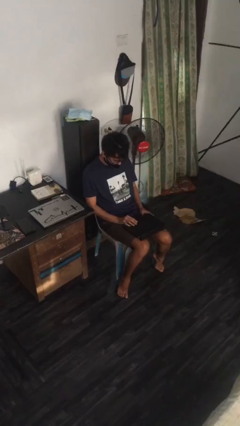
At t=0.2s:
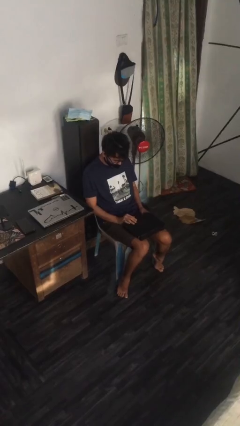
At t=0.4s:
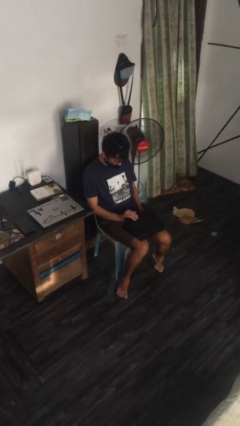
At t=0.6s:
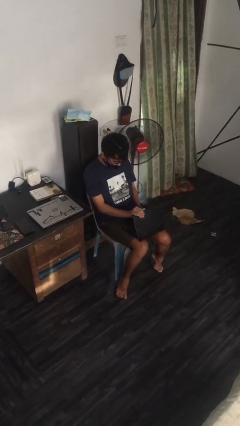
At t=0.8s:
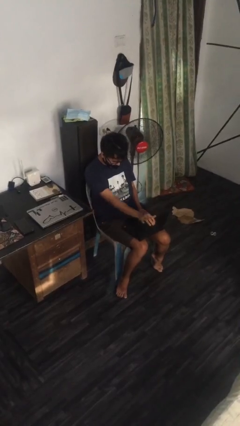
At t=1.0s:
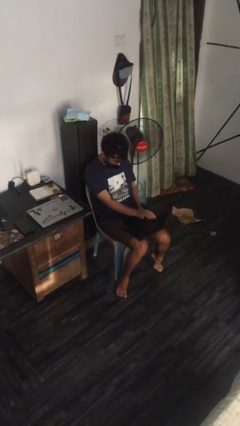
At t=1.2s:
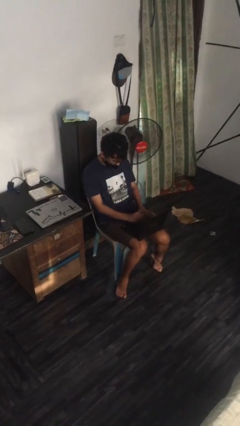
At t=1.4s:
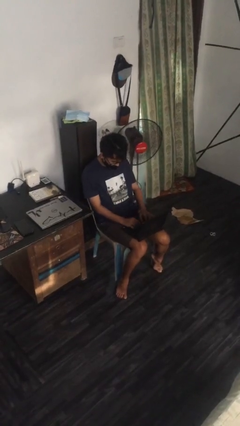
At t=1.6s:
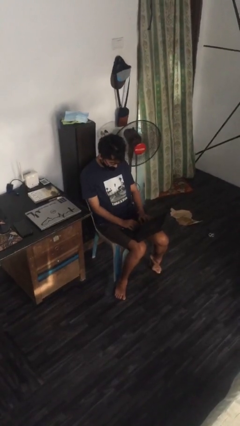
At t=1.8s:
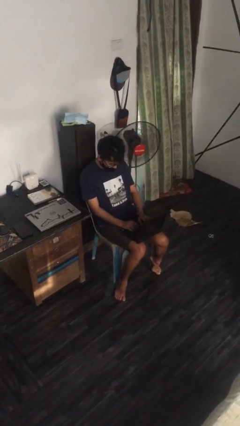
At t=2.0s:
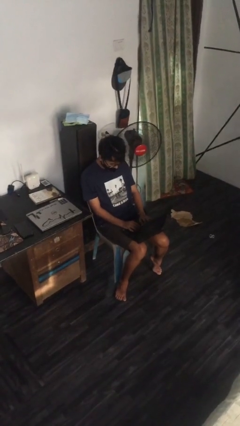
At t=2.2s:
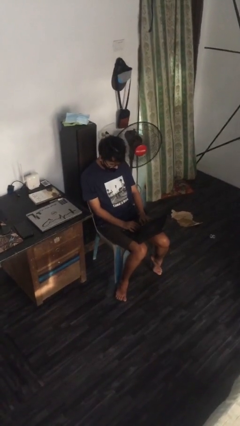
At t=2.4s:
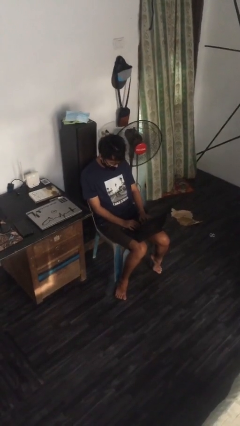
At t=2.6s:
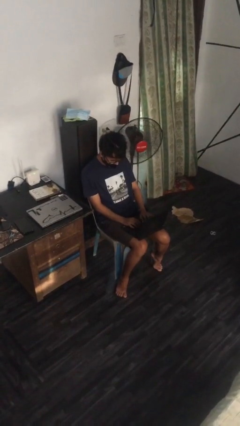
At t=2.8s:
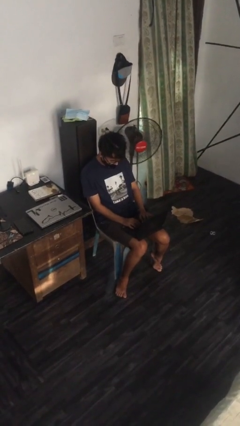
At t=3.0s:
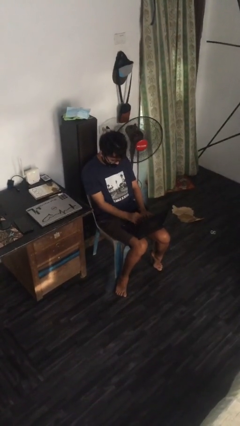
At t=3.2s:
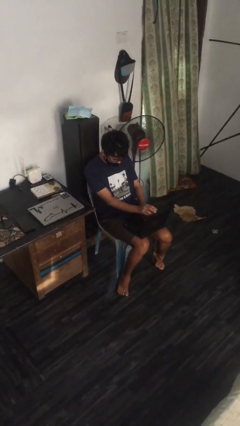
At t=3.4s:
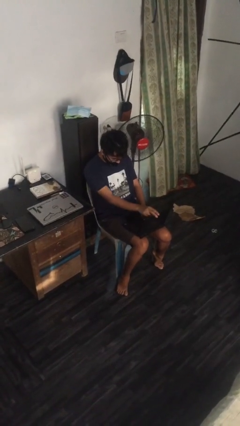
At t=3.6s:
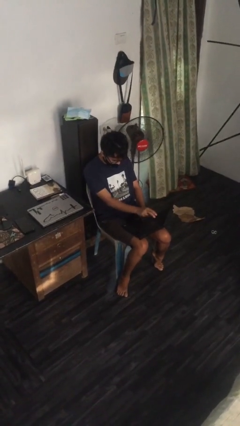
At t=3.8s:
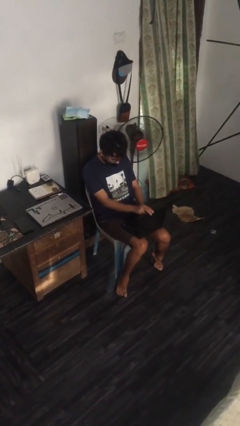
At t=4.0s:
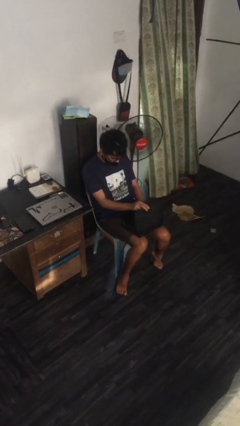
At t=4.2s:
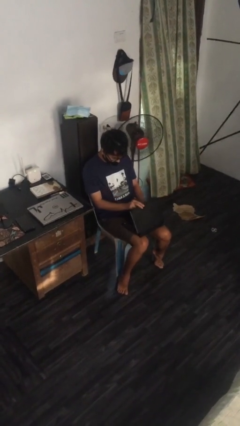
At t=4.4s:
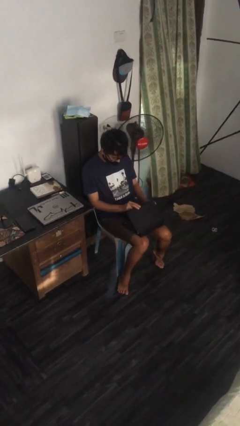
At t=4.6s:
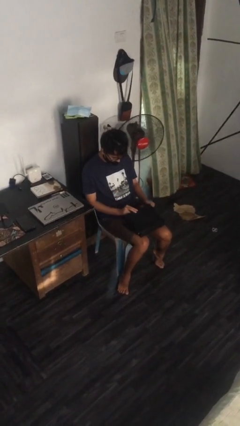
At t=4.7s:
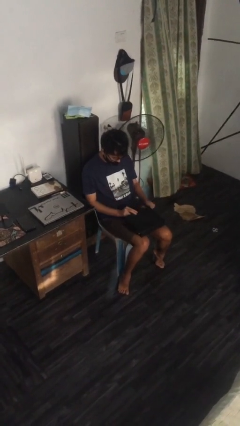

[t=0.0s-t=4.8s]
person interacts with laptop

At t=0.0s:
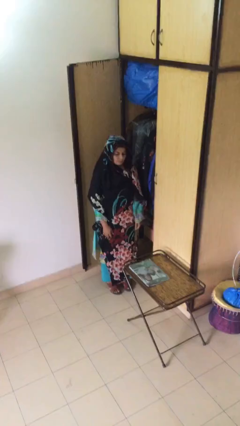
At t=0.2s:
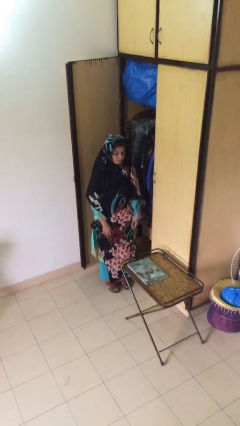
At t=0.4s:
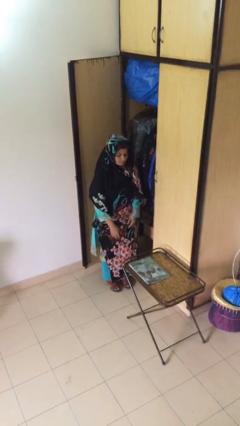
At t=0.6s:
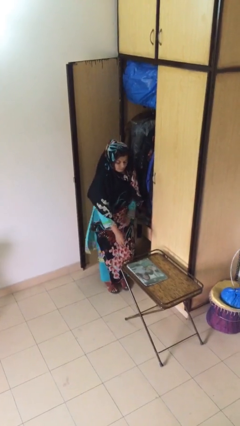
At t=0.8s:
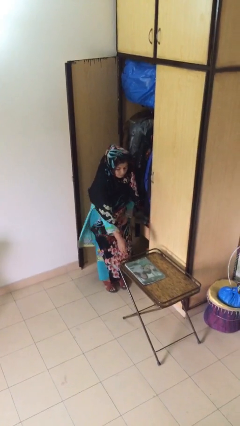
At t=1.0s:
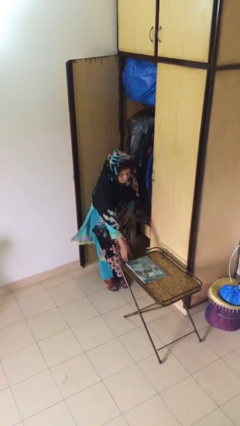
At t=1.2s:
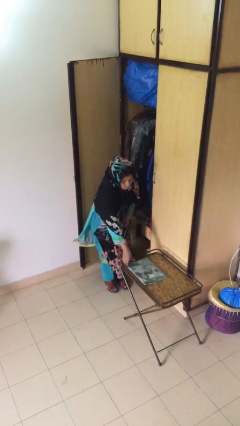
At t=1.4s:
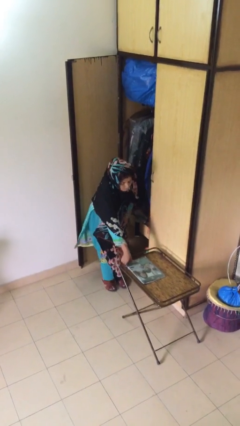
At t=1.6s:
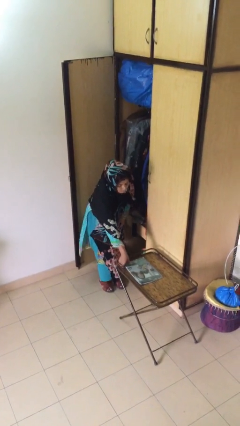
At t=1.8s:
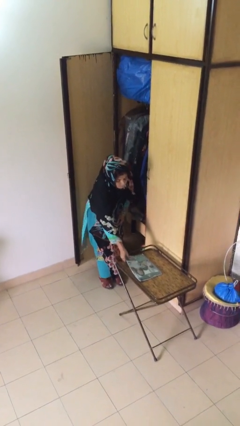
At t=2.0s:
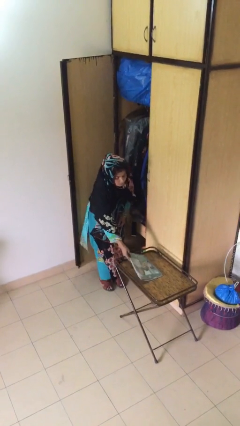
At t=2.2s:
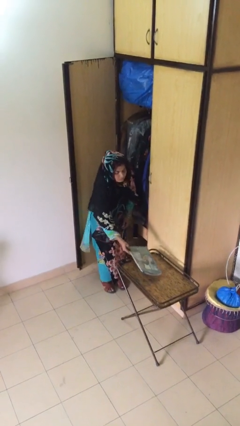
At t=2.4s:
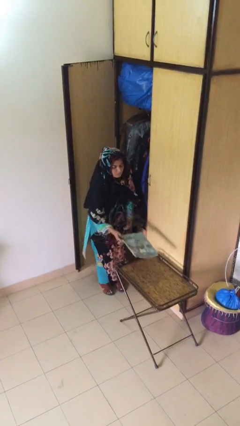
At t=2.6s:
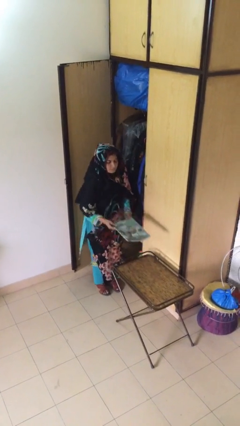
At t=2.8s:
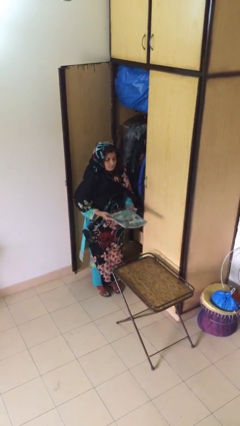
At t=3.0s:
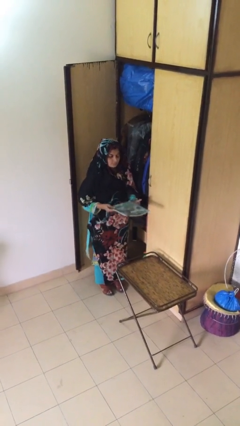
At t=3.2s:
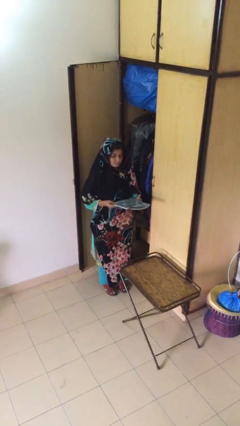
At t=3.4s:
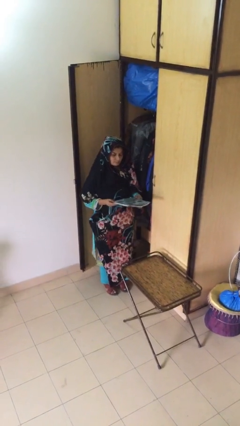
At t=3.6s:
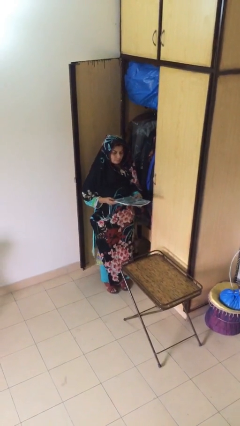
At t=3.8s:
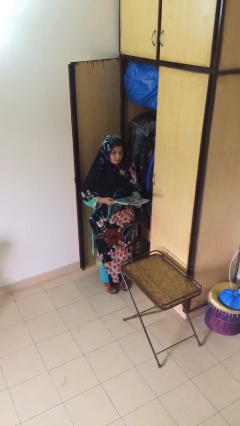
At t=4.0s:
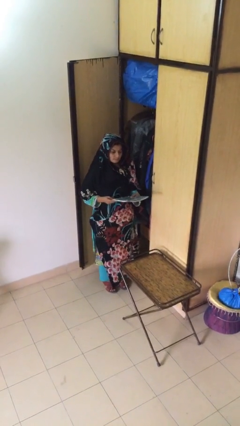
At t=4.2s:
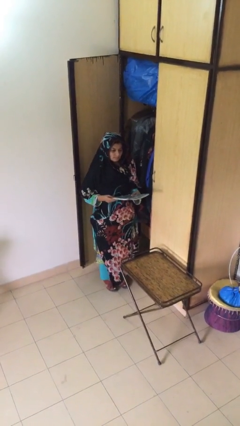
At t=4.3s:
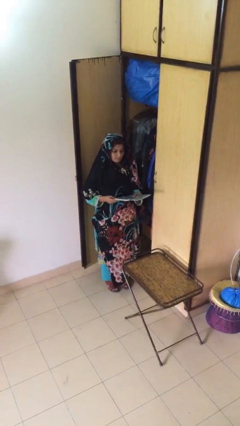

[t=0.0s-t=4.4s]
person picks up object from table

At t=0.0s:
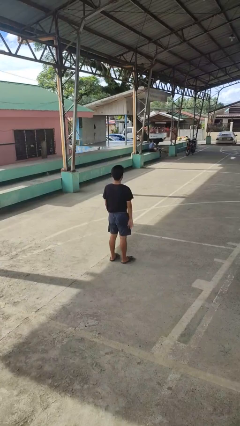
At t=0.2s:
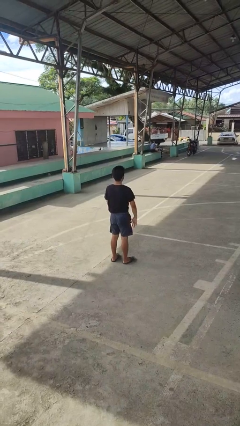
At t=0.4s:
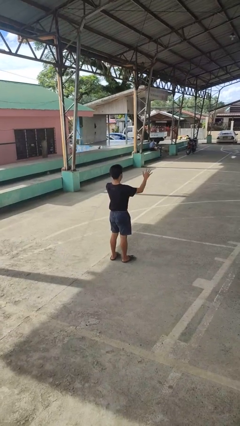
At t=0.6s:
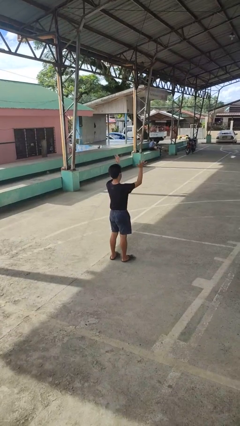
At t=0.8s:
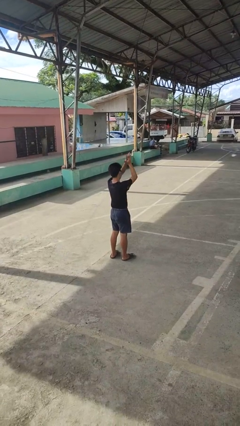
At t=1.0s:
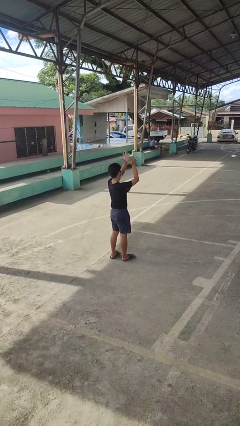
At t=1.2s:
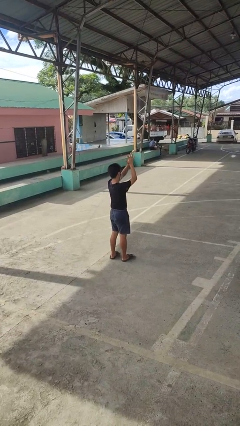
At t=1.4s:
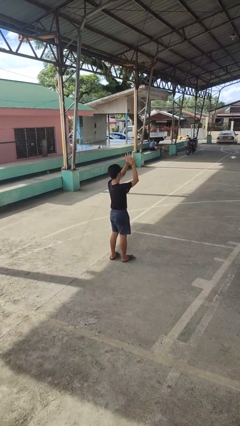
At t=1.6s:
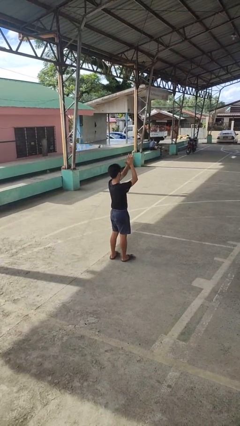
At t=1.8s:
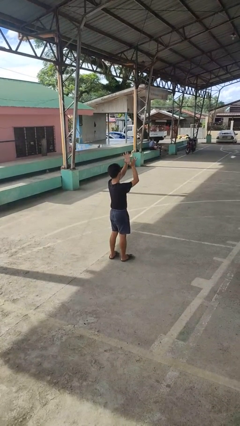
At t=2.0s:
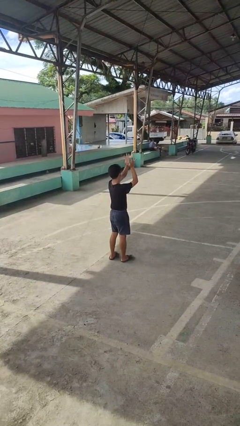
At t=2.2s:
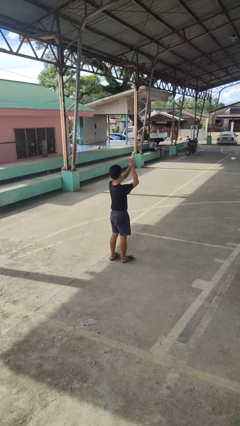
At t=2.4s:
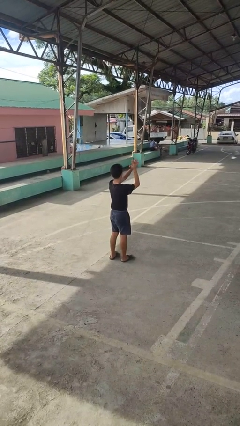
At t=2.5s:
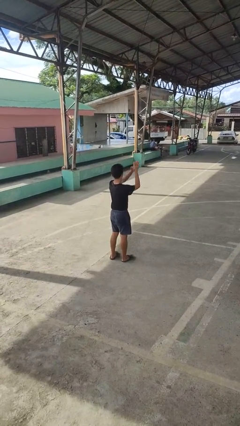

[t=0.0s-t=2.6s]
person claps hands

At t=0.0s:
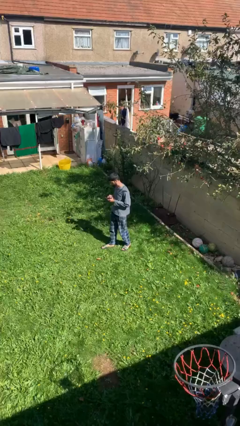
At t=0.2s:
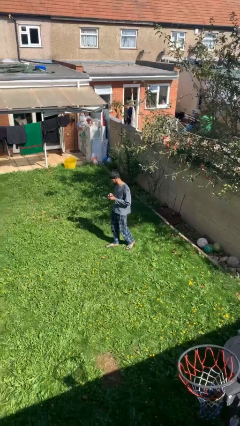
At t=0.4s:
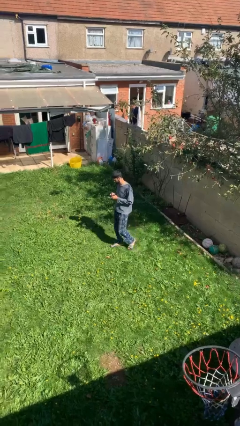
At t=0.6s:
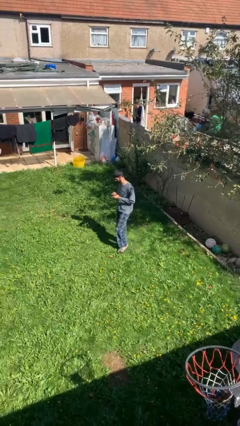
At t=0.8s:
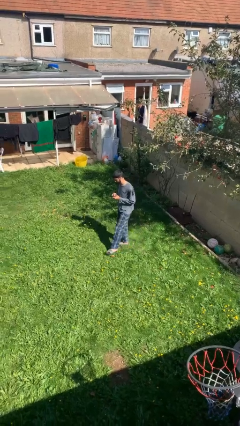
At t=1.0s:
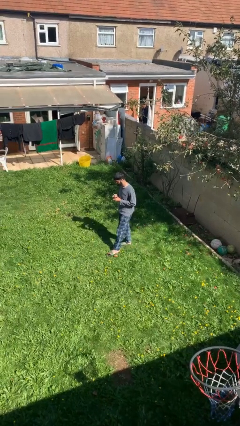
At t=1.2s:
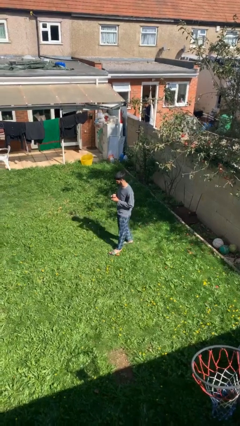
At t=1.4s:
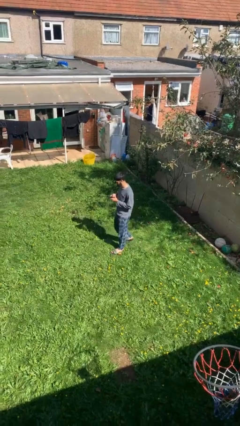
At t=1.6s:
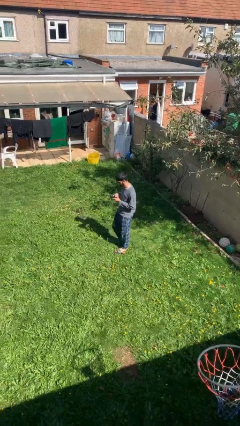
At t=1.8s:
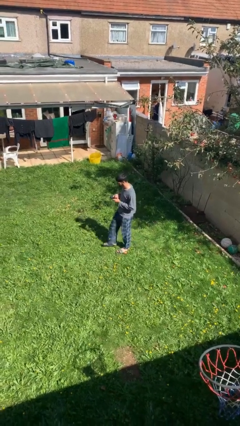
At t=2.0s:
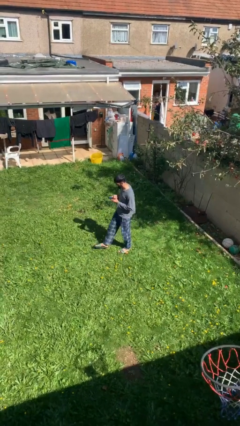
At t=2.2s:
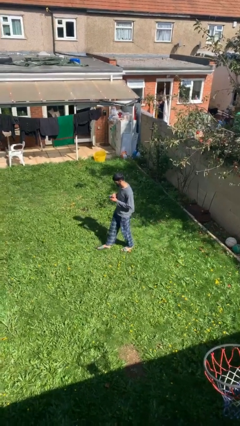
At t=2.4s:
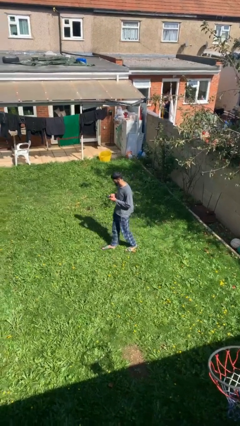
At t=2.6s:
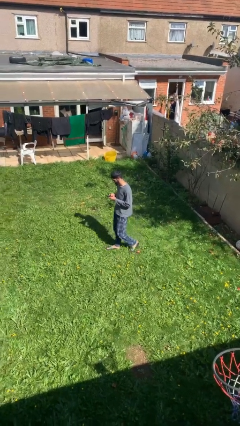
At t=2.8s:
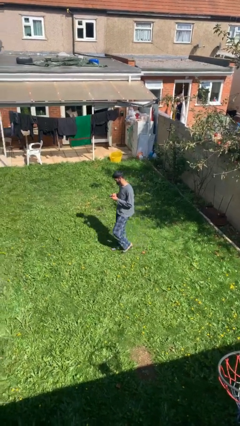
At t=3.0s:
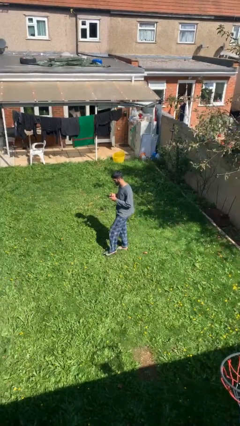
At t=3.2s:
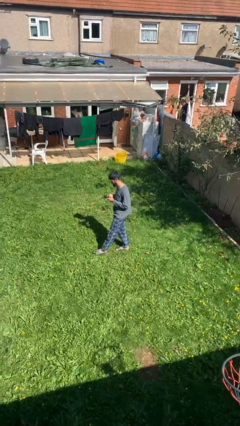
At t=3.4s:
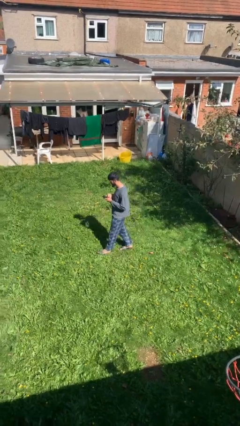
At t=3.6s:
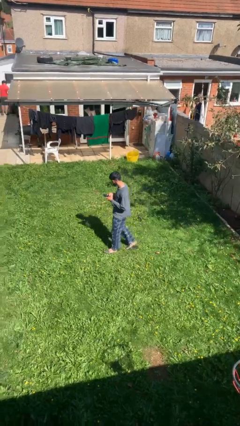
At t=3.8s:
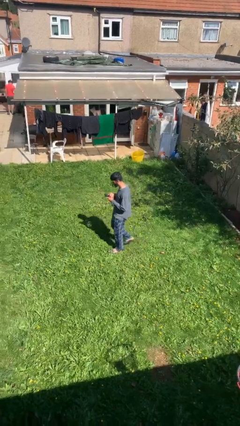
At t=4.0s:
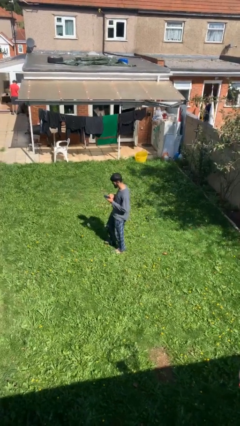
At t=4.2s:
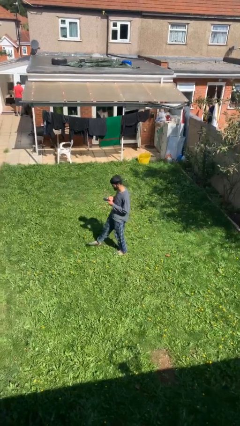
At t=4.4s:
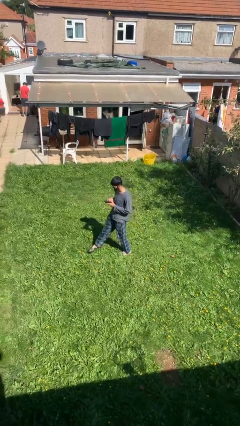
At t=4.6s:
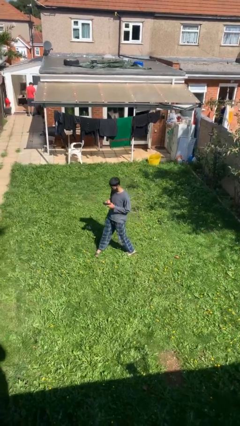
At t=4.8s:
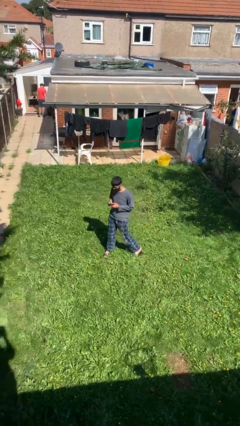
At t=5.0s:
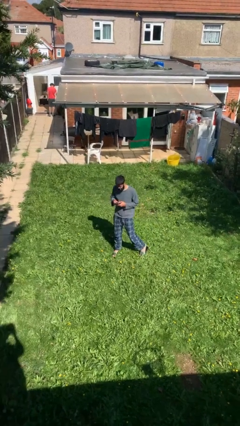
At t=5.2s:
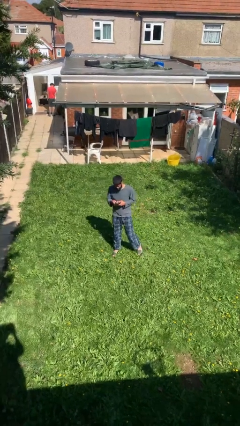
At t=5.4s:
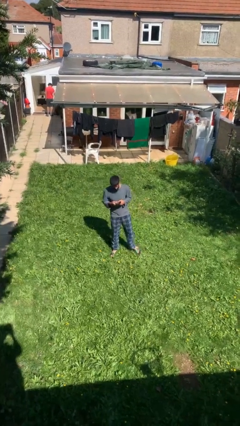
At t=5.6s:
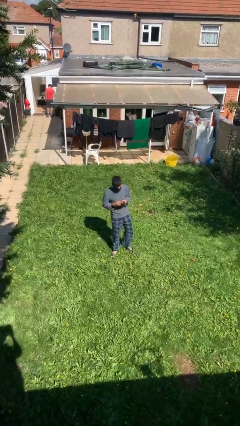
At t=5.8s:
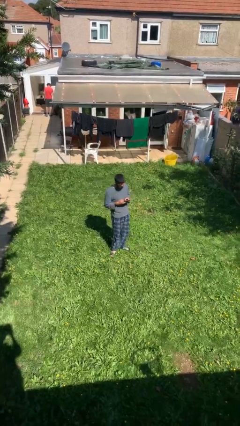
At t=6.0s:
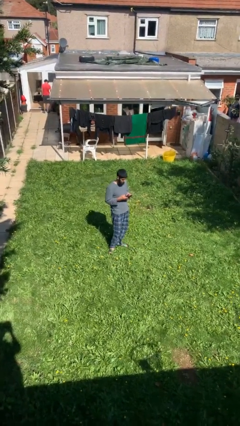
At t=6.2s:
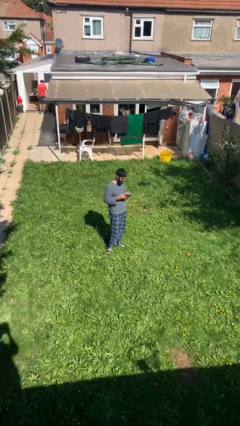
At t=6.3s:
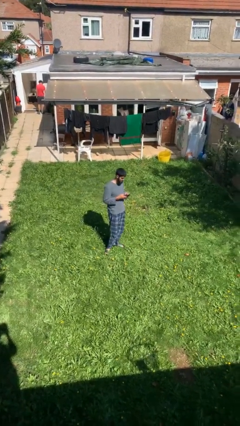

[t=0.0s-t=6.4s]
person texts on phone
